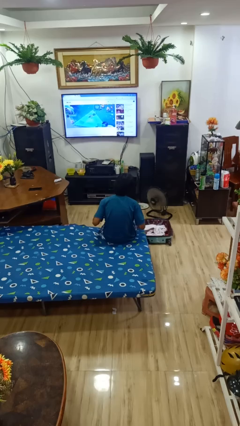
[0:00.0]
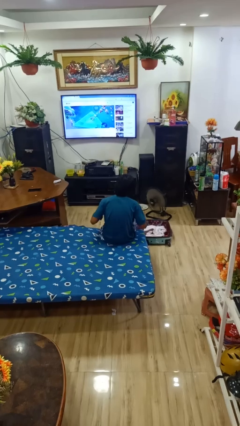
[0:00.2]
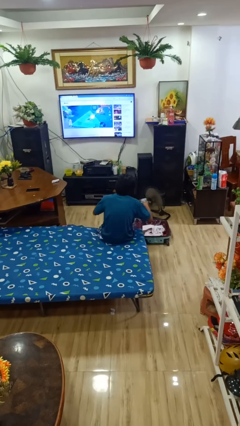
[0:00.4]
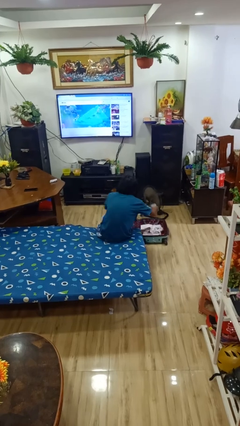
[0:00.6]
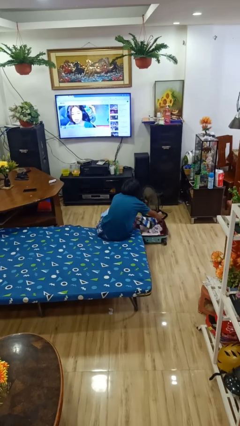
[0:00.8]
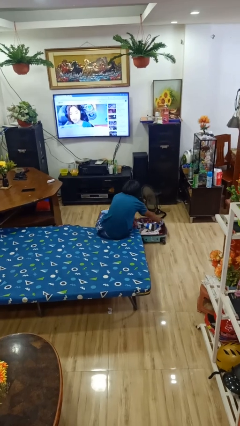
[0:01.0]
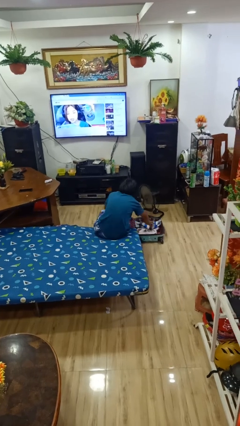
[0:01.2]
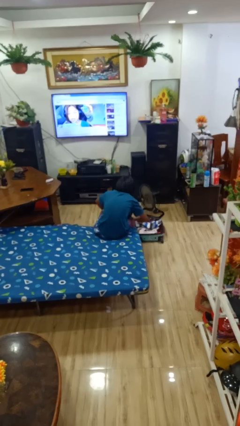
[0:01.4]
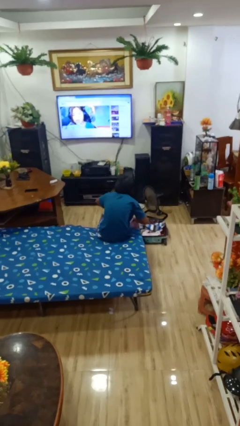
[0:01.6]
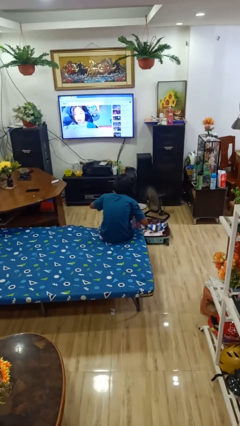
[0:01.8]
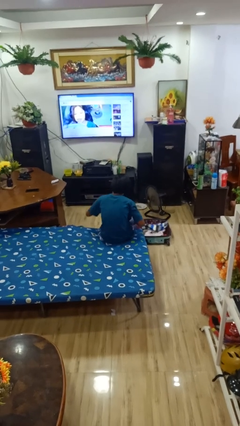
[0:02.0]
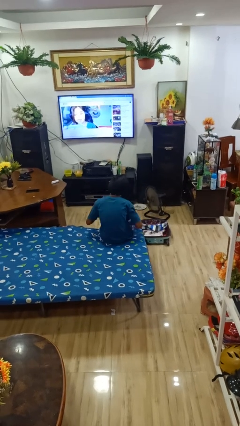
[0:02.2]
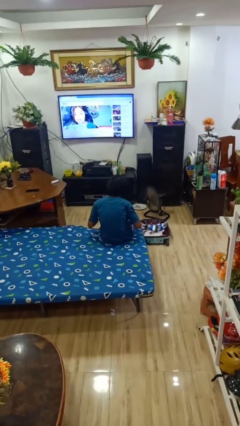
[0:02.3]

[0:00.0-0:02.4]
person loads clothes into suitcase

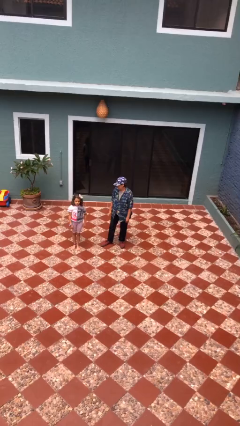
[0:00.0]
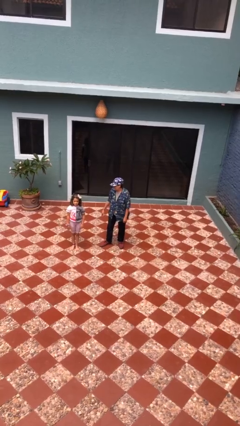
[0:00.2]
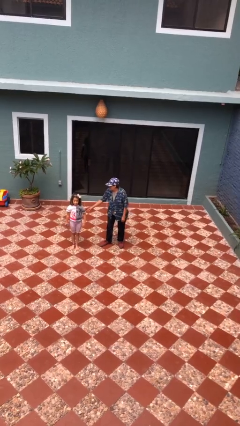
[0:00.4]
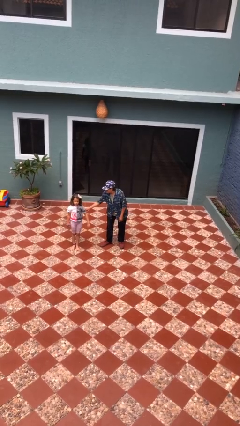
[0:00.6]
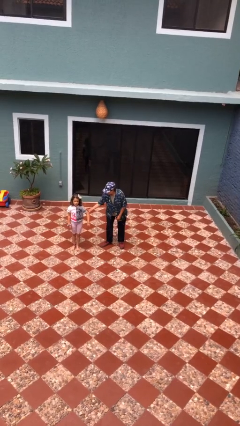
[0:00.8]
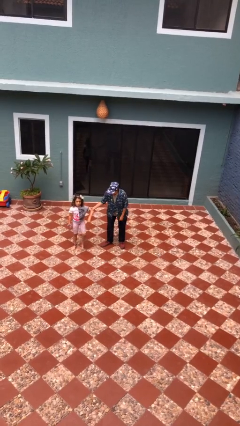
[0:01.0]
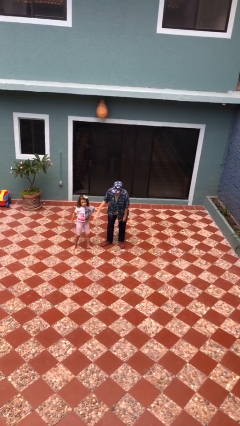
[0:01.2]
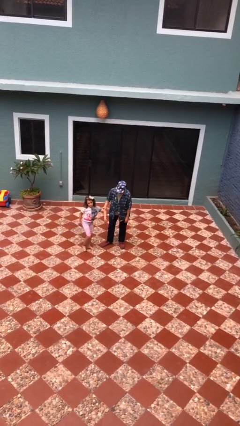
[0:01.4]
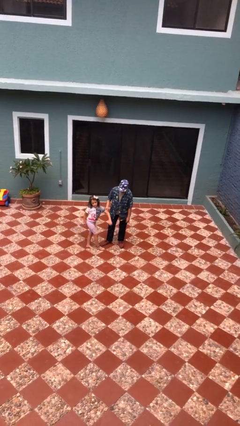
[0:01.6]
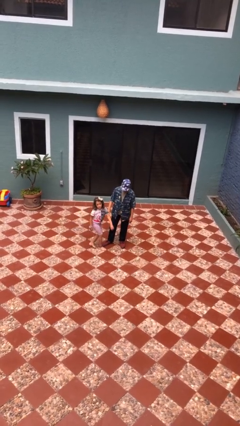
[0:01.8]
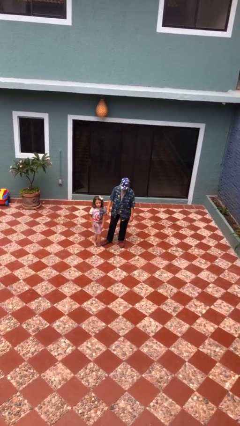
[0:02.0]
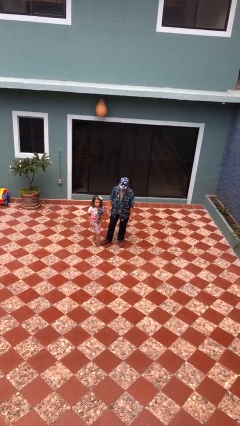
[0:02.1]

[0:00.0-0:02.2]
person grabs person by bicep

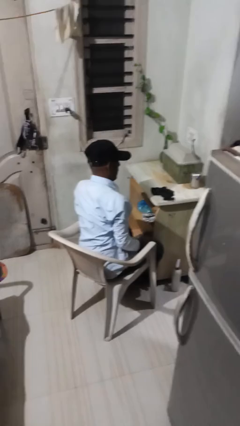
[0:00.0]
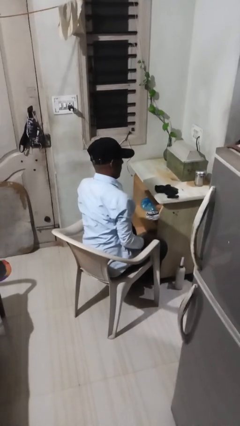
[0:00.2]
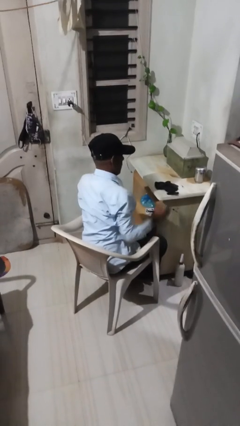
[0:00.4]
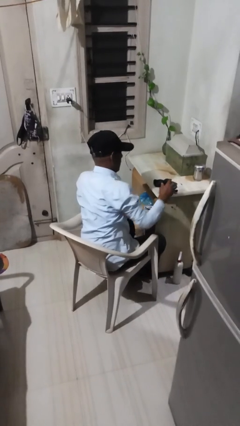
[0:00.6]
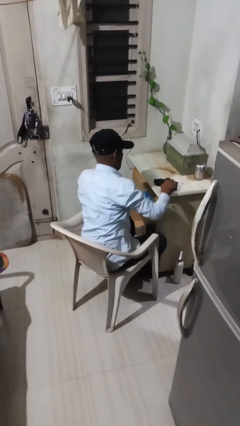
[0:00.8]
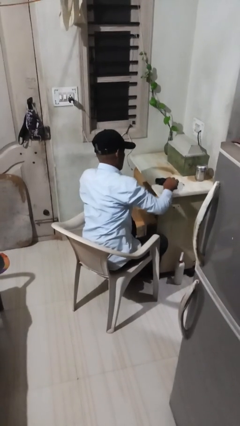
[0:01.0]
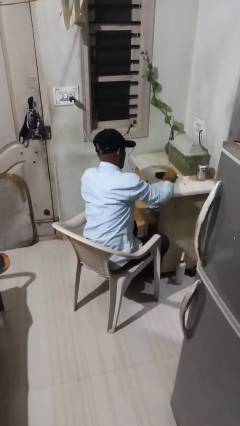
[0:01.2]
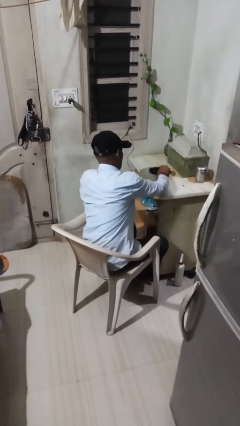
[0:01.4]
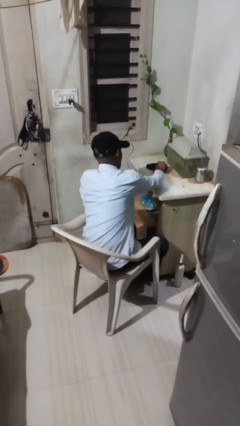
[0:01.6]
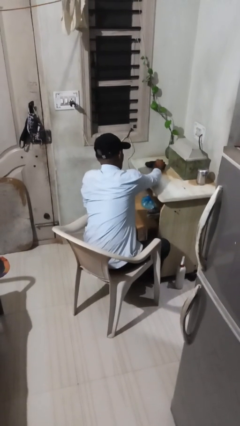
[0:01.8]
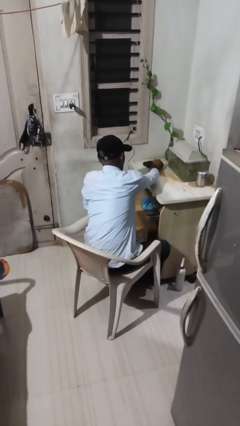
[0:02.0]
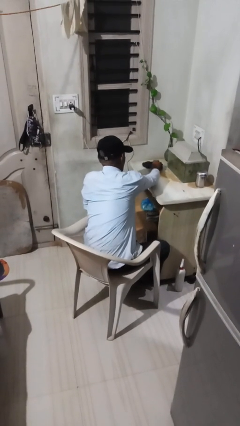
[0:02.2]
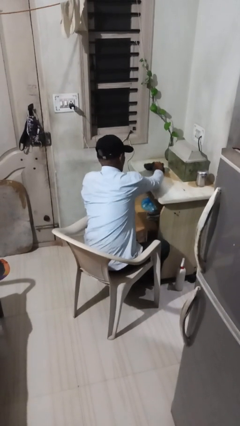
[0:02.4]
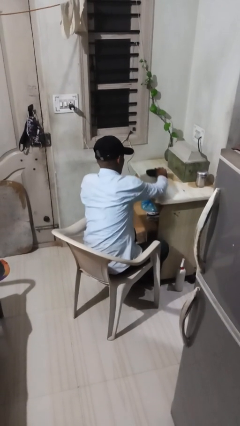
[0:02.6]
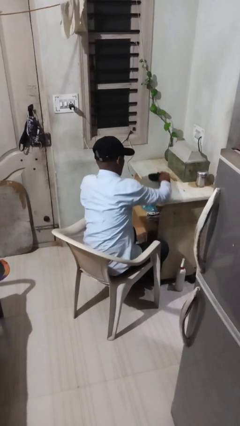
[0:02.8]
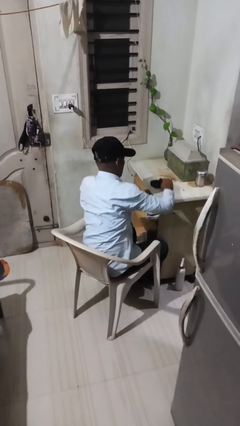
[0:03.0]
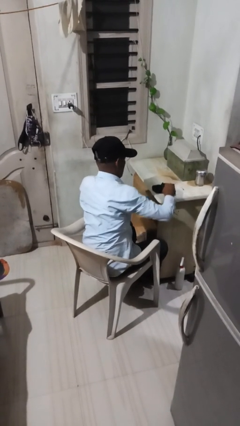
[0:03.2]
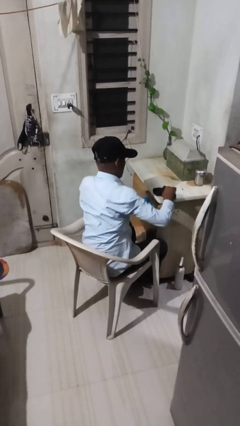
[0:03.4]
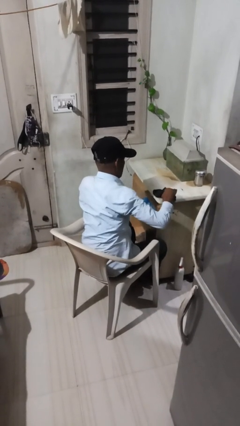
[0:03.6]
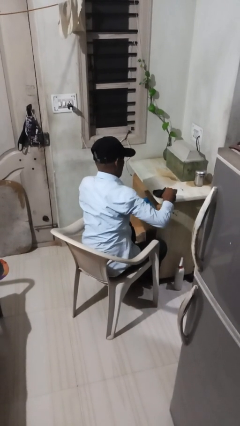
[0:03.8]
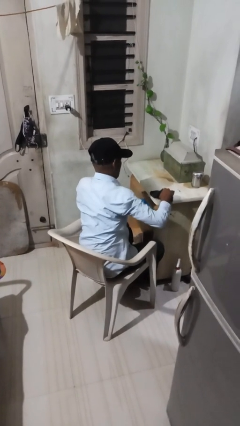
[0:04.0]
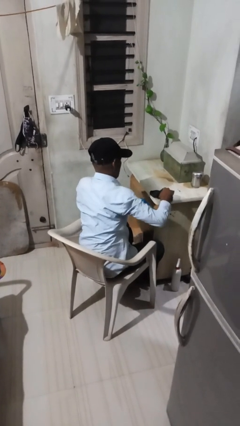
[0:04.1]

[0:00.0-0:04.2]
person cleans table with rag

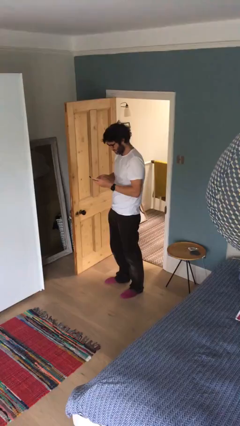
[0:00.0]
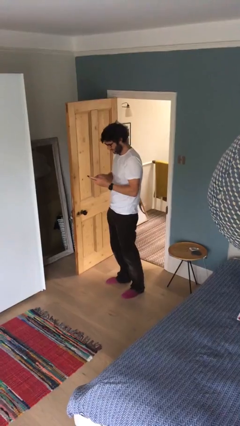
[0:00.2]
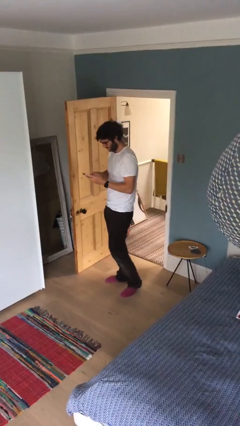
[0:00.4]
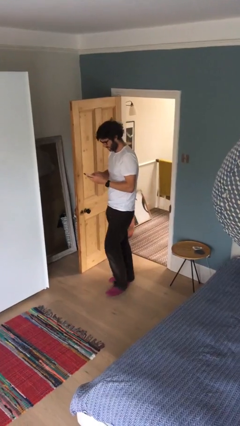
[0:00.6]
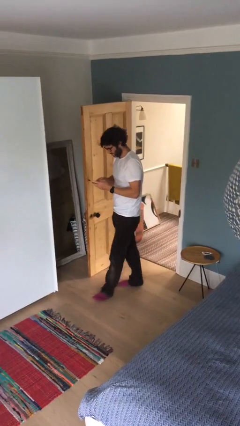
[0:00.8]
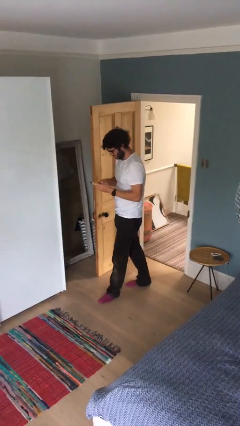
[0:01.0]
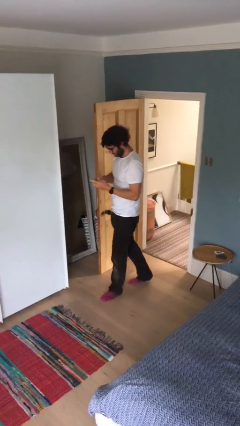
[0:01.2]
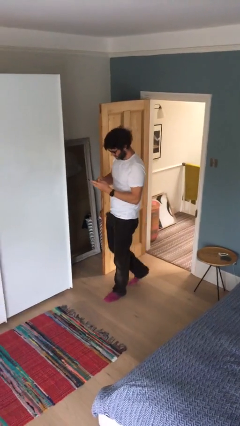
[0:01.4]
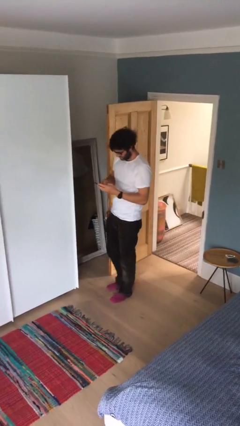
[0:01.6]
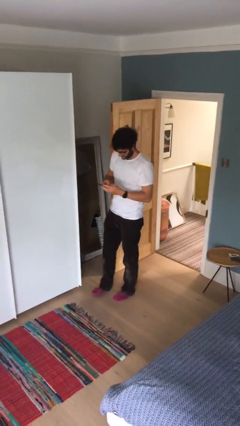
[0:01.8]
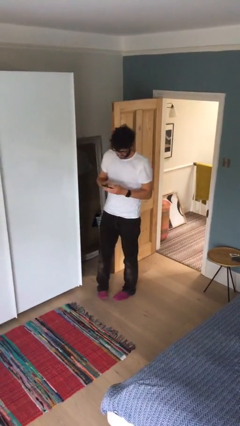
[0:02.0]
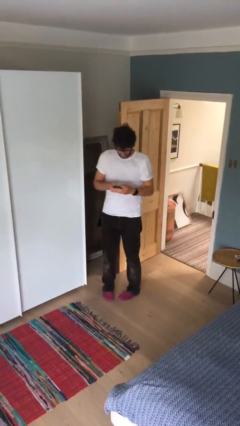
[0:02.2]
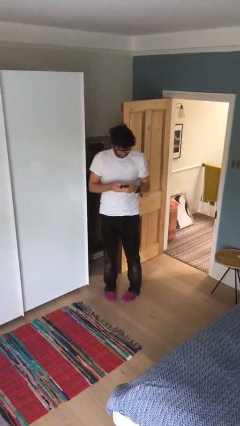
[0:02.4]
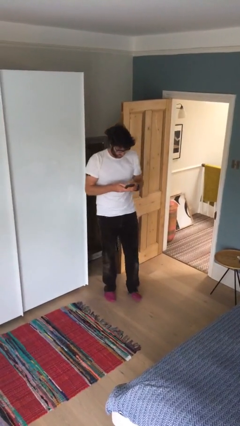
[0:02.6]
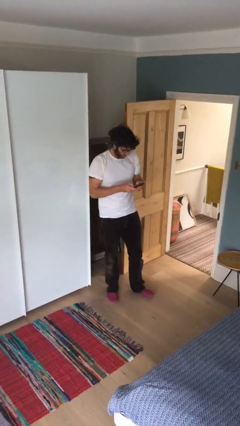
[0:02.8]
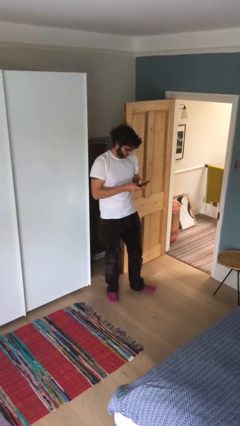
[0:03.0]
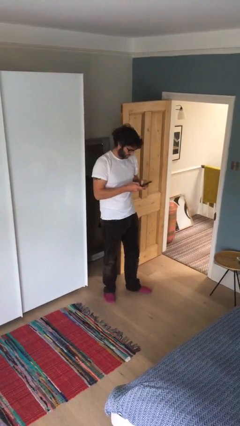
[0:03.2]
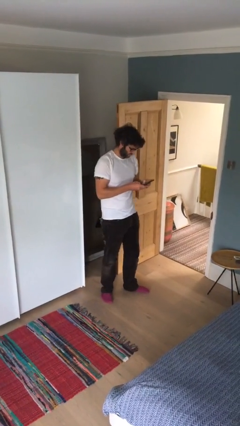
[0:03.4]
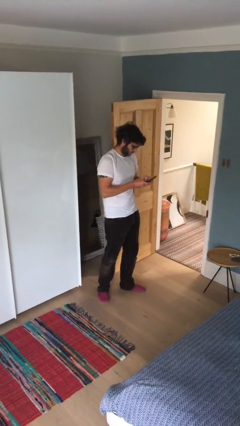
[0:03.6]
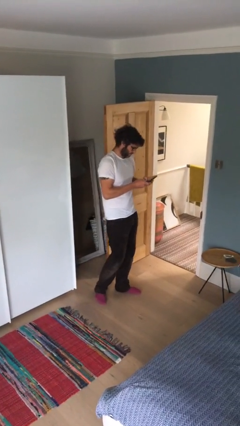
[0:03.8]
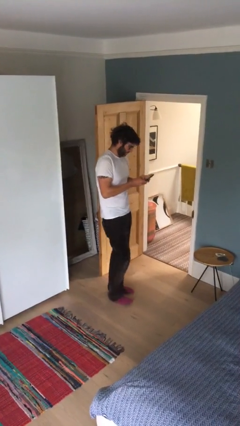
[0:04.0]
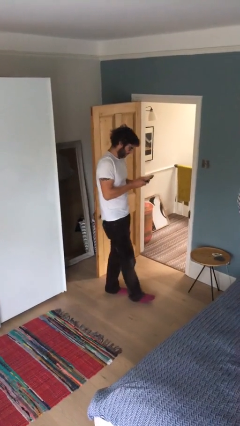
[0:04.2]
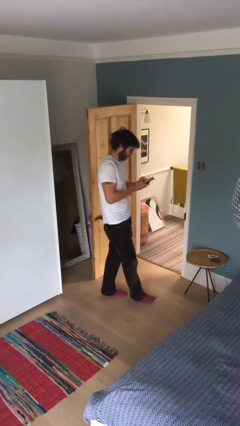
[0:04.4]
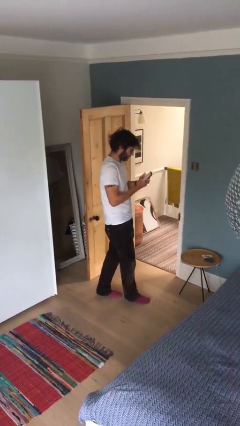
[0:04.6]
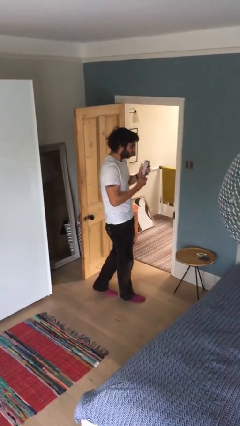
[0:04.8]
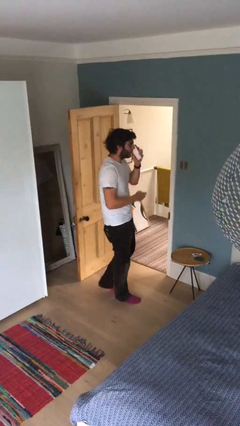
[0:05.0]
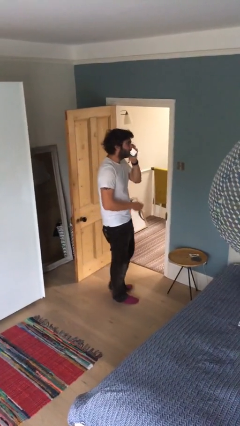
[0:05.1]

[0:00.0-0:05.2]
person texts on phone

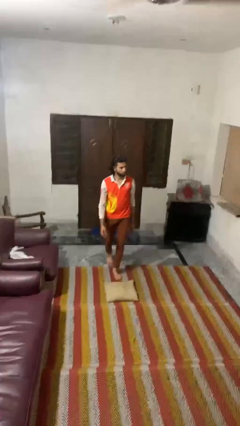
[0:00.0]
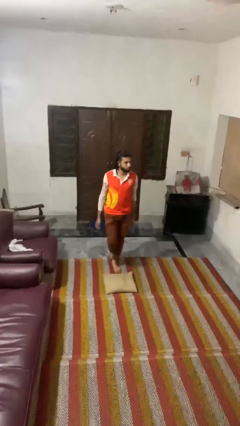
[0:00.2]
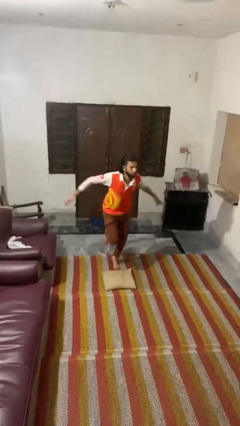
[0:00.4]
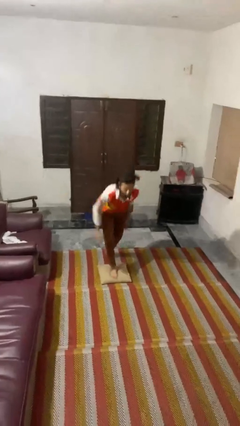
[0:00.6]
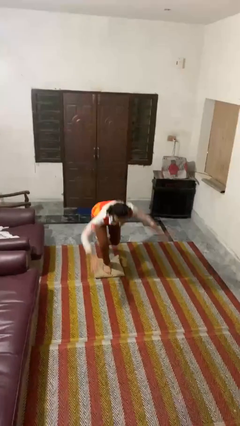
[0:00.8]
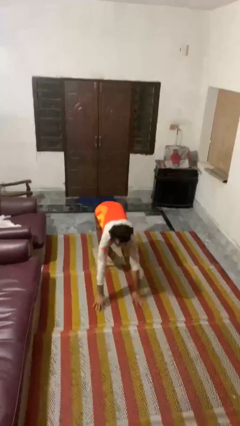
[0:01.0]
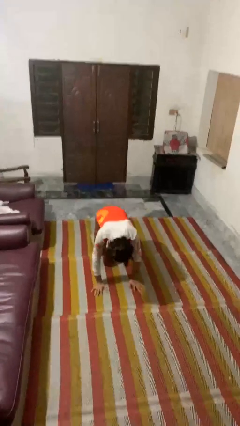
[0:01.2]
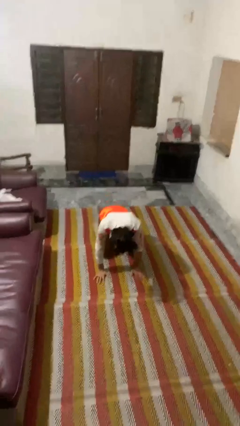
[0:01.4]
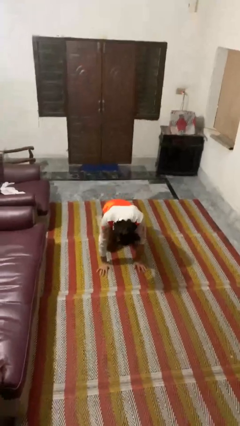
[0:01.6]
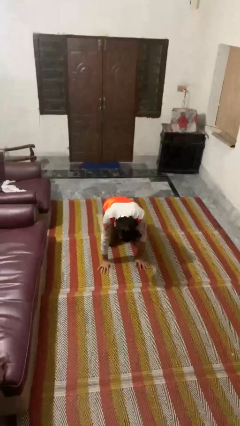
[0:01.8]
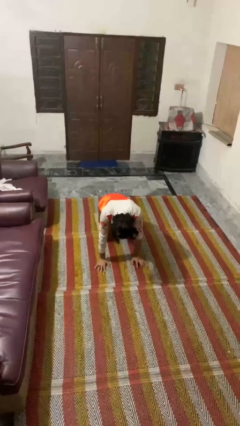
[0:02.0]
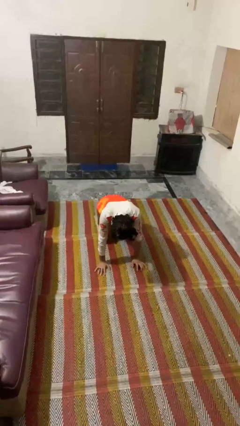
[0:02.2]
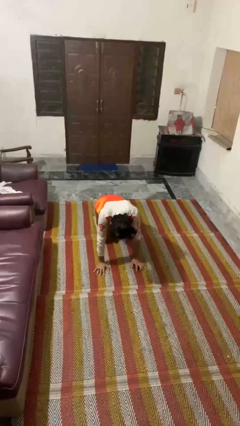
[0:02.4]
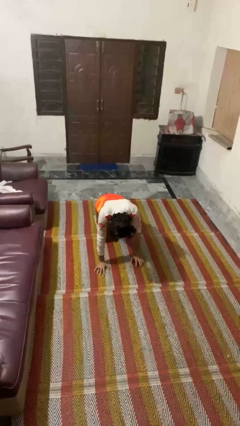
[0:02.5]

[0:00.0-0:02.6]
person trips on object on floor

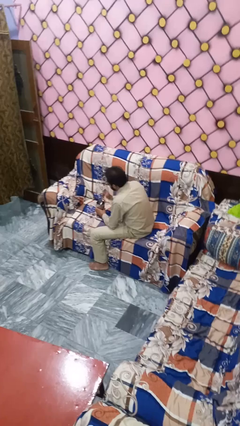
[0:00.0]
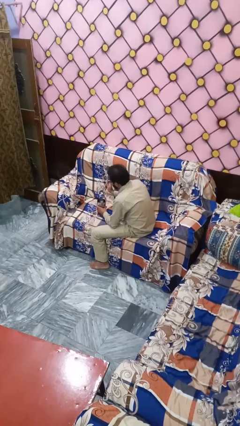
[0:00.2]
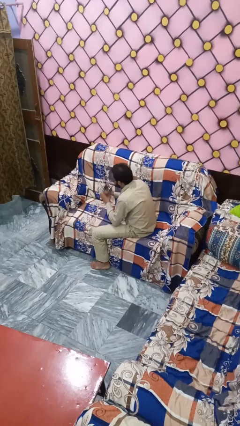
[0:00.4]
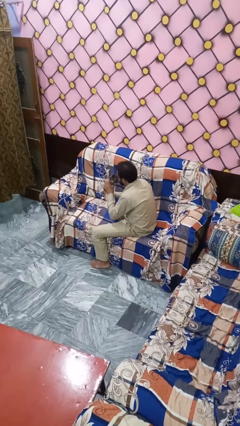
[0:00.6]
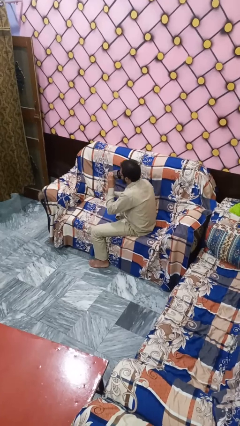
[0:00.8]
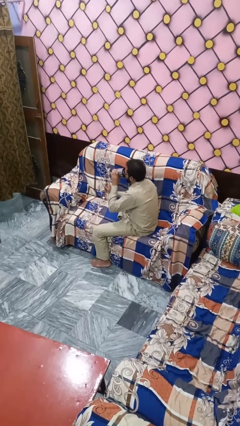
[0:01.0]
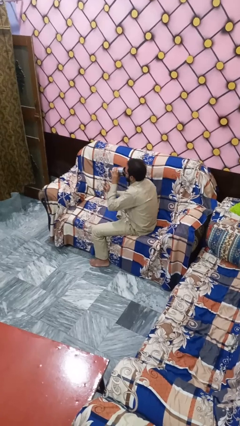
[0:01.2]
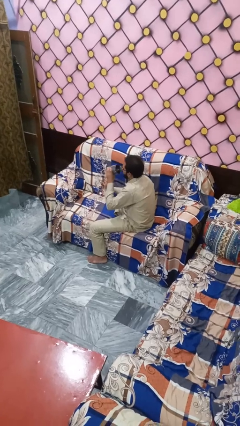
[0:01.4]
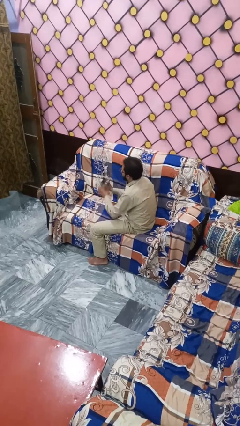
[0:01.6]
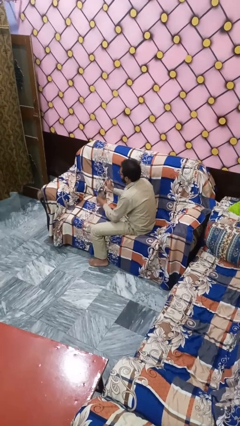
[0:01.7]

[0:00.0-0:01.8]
person drinks from mug
